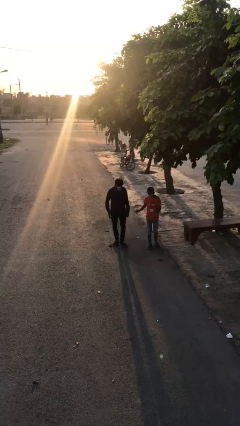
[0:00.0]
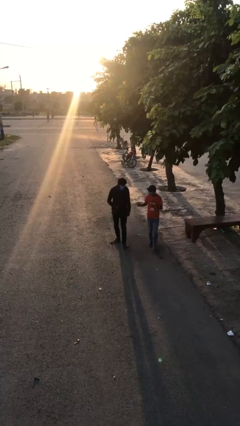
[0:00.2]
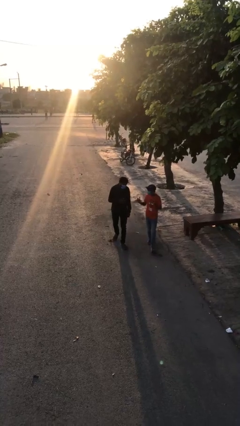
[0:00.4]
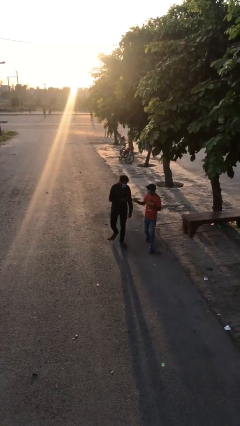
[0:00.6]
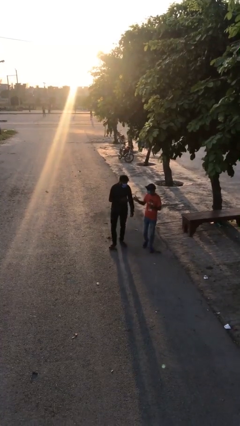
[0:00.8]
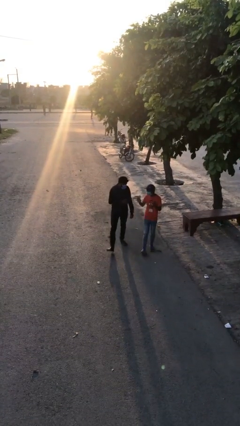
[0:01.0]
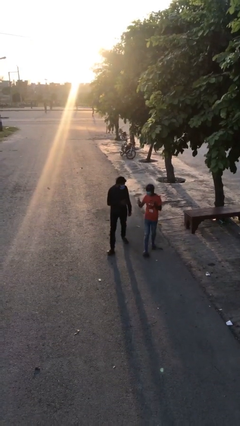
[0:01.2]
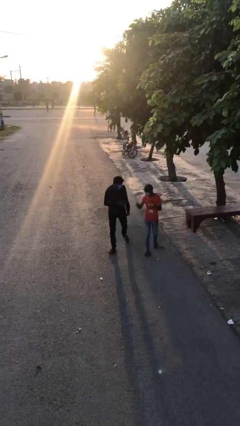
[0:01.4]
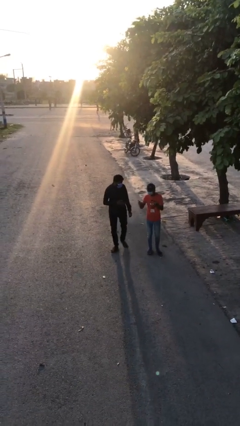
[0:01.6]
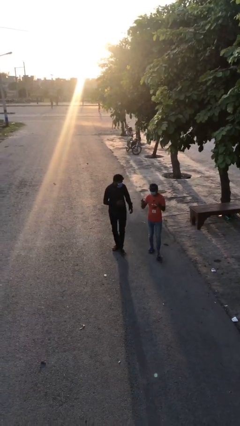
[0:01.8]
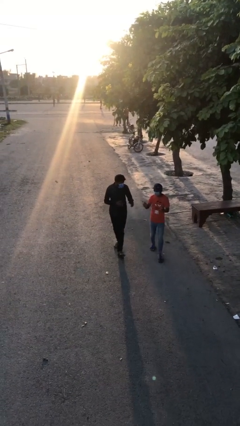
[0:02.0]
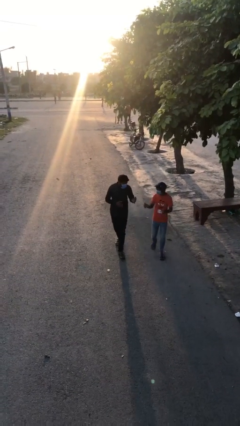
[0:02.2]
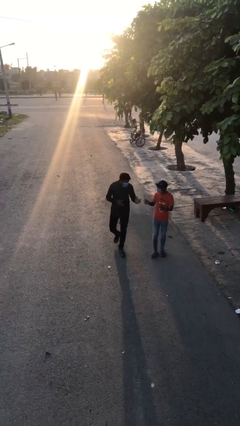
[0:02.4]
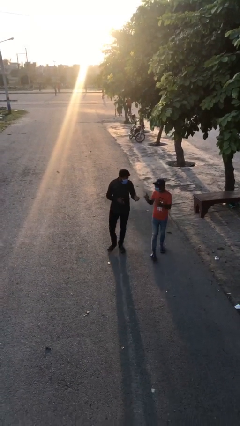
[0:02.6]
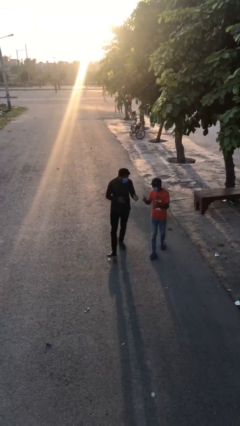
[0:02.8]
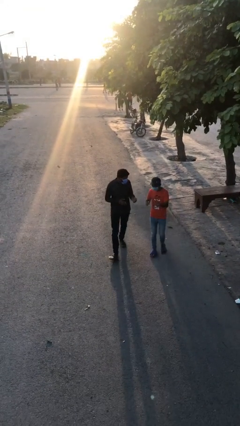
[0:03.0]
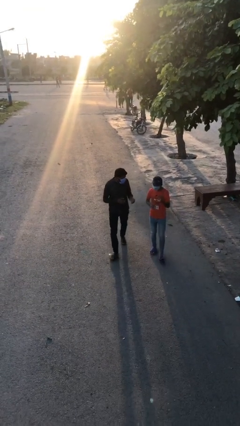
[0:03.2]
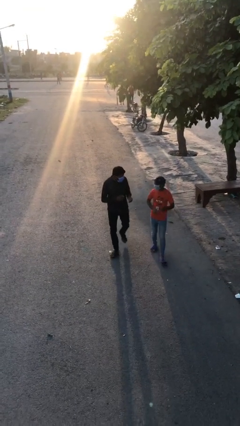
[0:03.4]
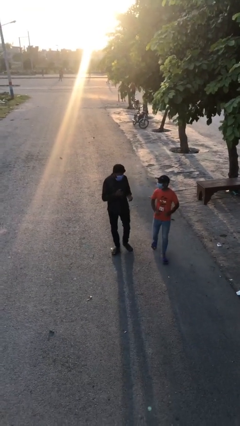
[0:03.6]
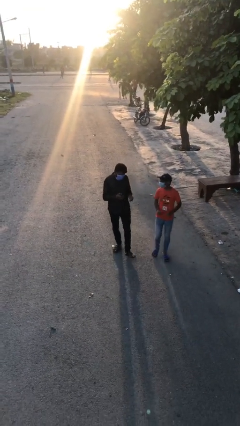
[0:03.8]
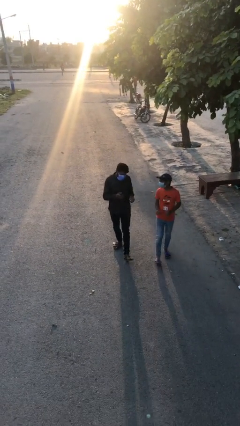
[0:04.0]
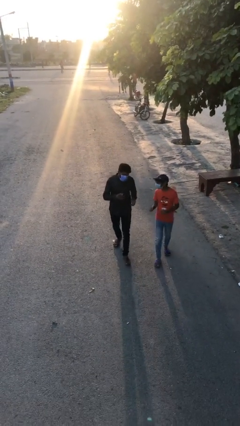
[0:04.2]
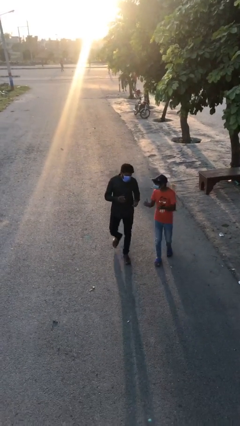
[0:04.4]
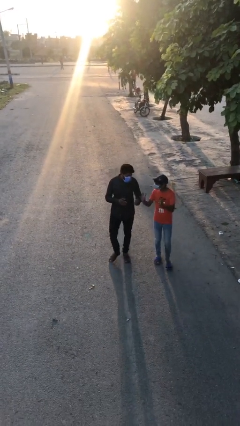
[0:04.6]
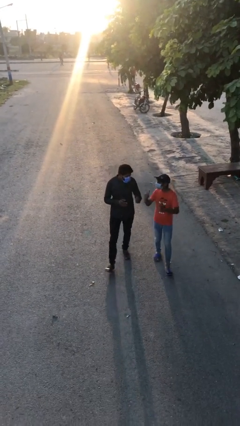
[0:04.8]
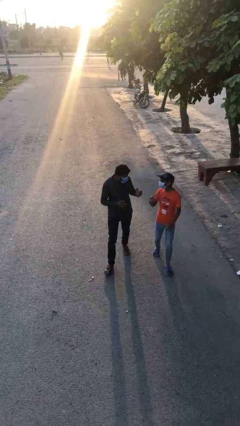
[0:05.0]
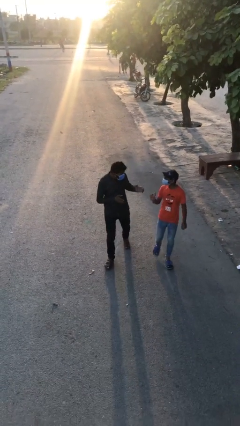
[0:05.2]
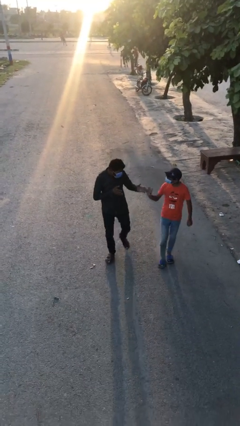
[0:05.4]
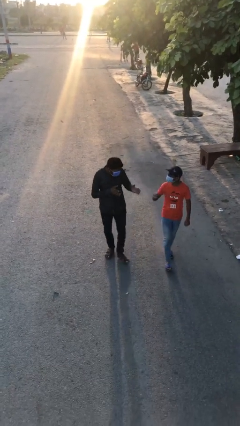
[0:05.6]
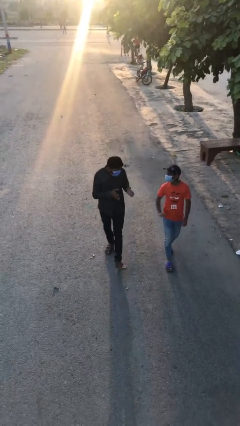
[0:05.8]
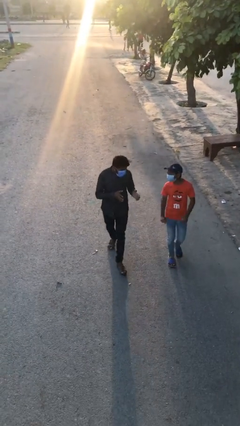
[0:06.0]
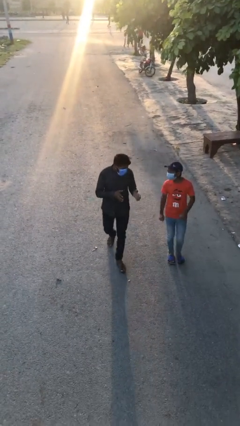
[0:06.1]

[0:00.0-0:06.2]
person talks to person

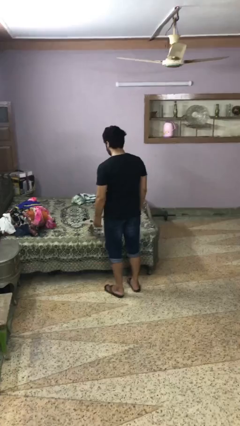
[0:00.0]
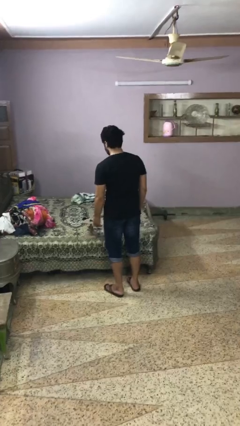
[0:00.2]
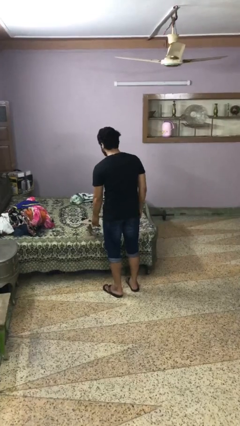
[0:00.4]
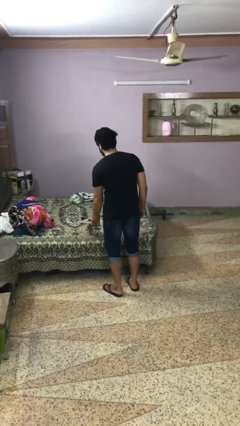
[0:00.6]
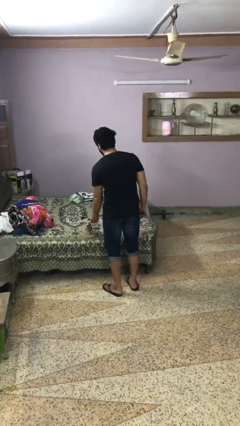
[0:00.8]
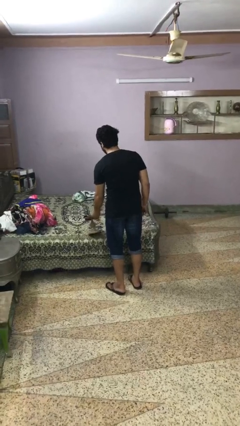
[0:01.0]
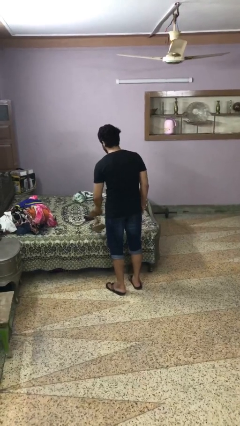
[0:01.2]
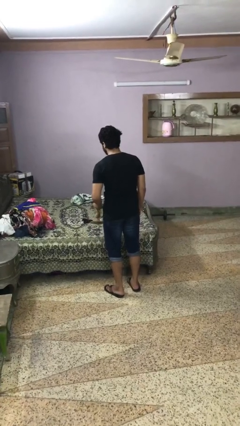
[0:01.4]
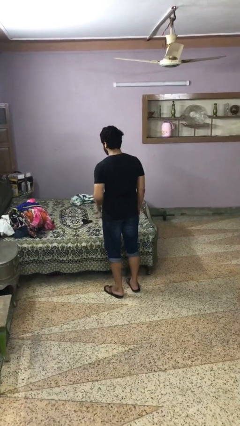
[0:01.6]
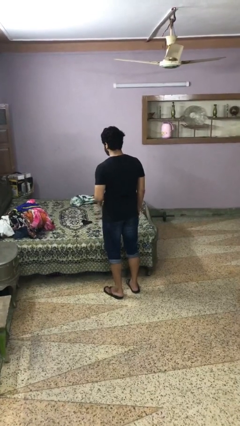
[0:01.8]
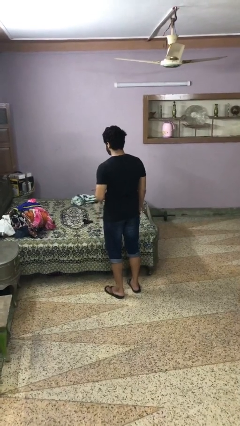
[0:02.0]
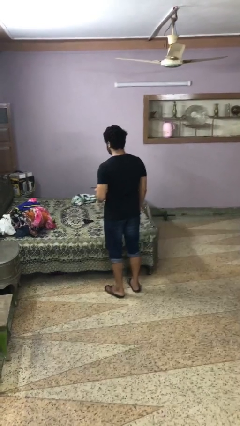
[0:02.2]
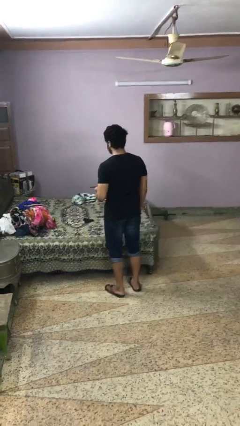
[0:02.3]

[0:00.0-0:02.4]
person picks up object from bed

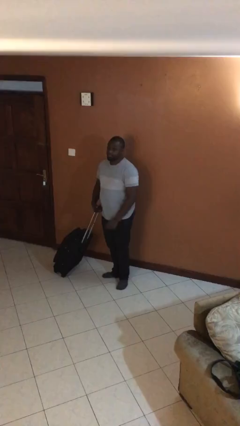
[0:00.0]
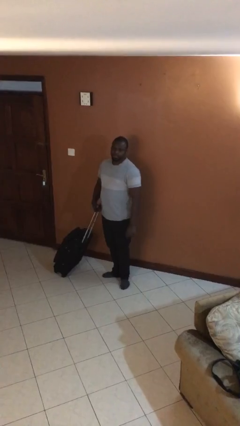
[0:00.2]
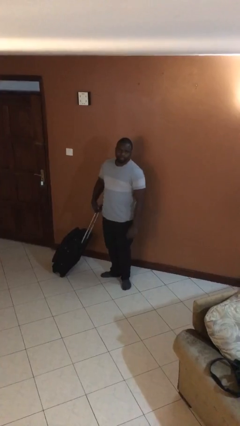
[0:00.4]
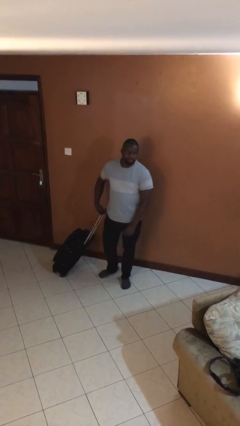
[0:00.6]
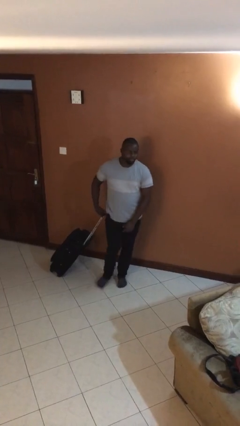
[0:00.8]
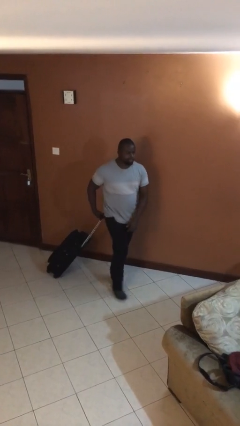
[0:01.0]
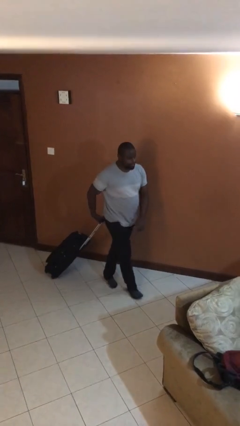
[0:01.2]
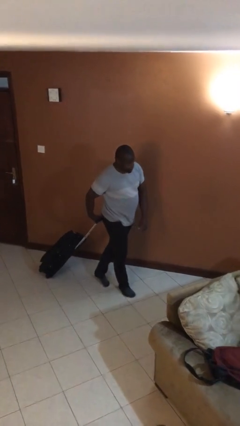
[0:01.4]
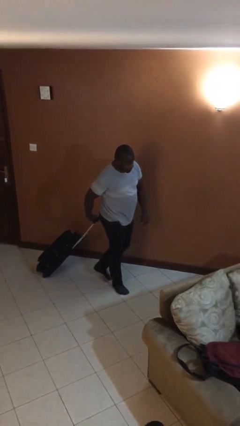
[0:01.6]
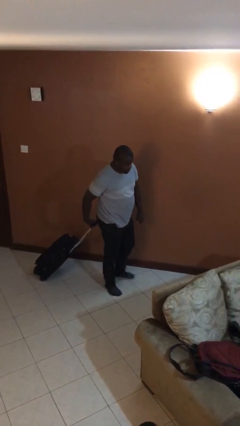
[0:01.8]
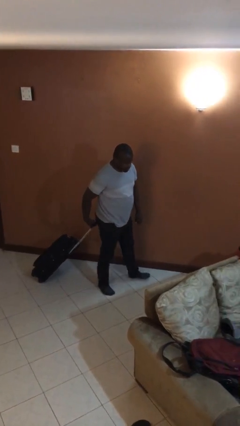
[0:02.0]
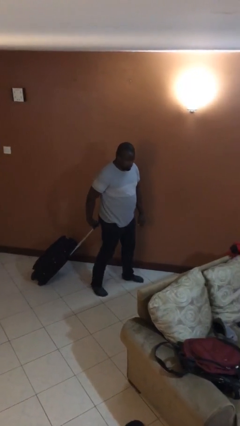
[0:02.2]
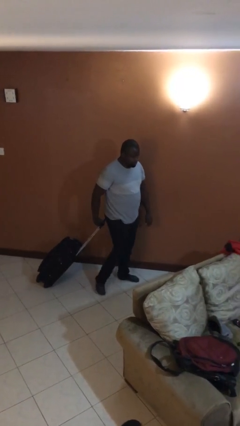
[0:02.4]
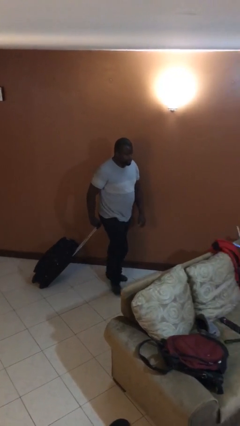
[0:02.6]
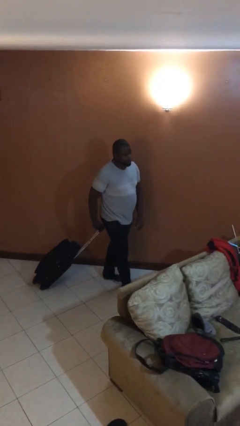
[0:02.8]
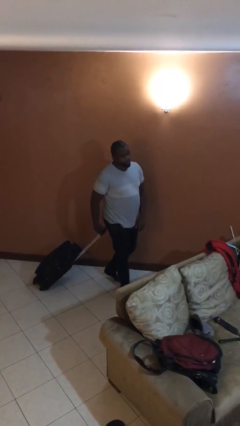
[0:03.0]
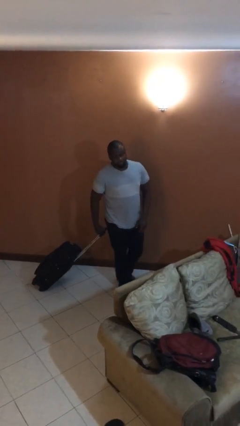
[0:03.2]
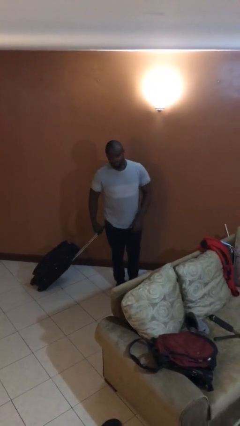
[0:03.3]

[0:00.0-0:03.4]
person pulls wheeled cart

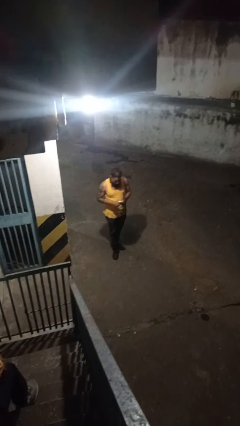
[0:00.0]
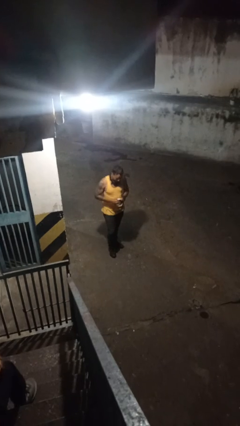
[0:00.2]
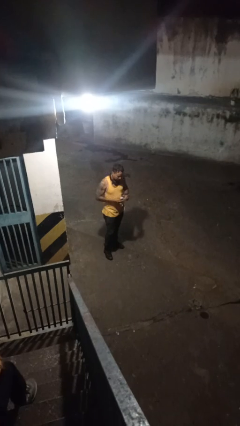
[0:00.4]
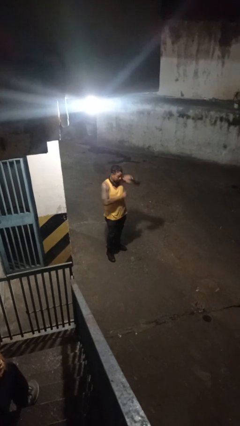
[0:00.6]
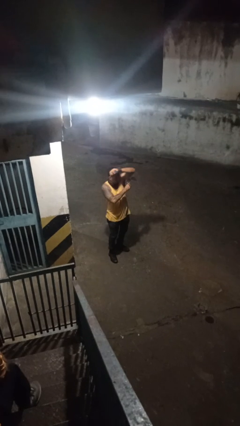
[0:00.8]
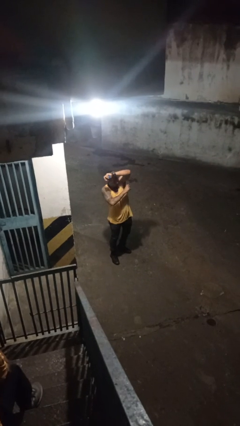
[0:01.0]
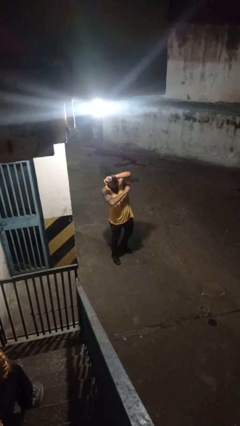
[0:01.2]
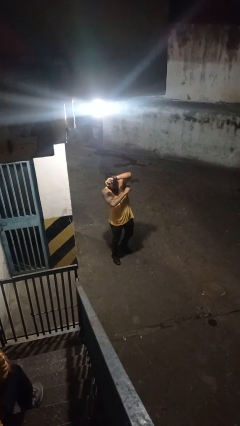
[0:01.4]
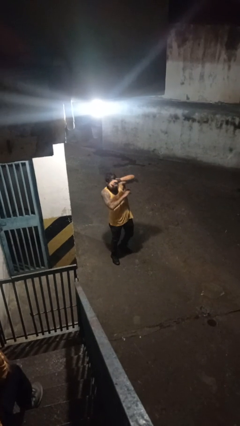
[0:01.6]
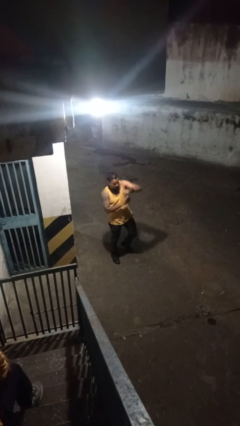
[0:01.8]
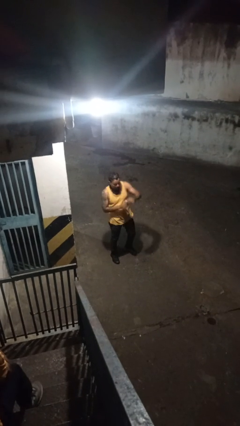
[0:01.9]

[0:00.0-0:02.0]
person applies deodorant

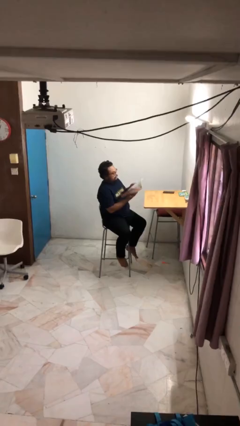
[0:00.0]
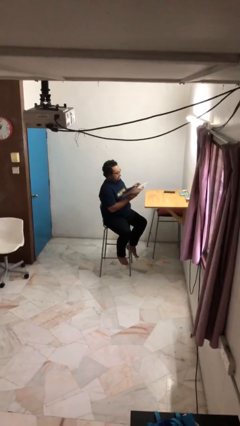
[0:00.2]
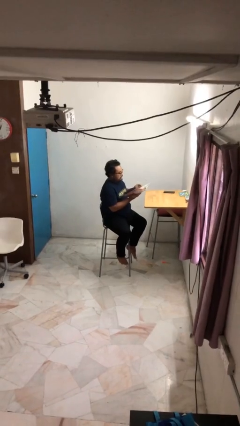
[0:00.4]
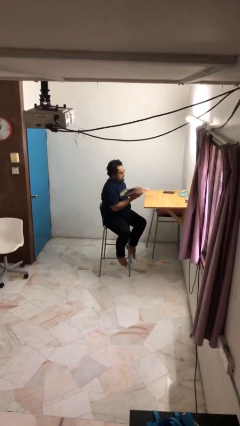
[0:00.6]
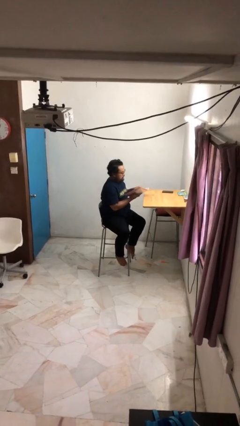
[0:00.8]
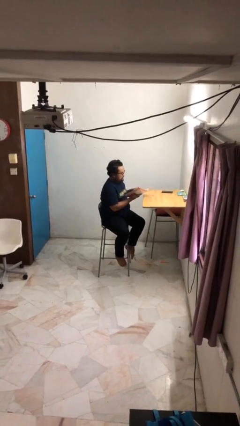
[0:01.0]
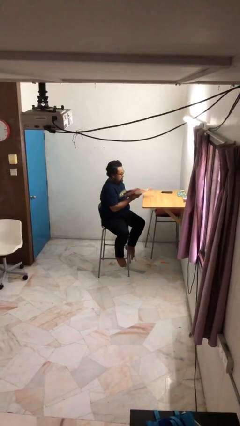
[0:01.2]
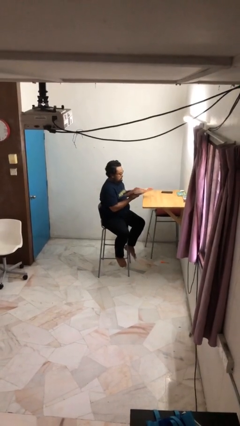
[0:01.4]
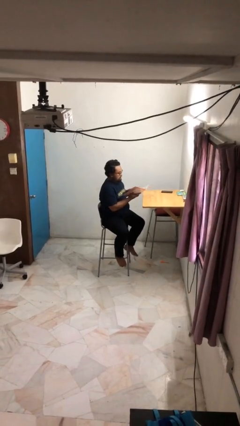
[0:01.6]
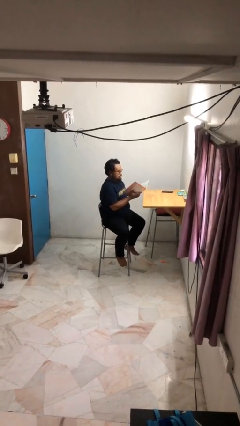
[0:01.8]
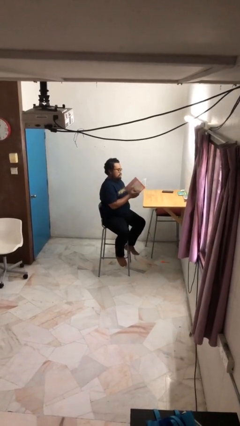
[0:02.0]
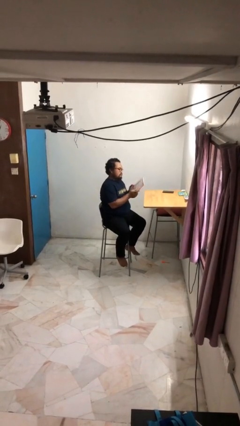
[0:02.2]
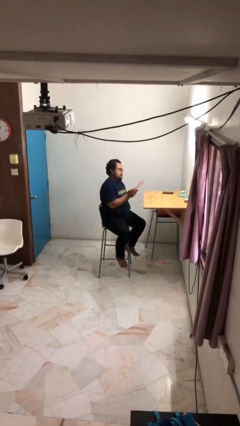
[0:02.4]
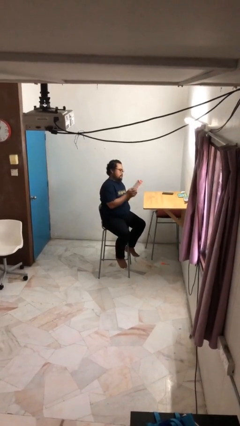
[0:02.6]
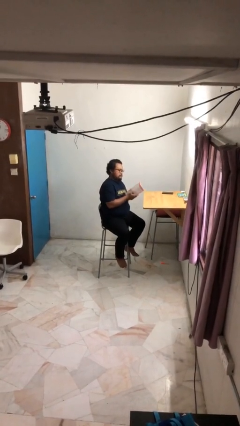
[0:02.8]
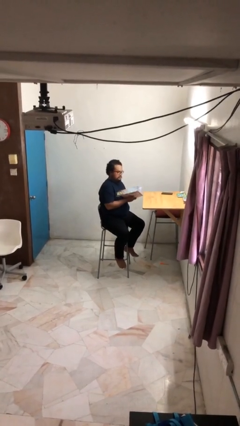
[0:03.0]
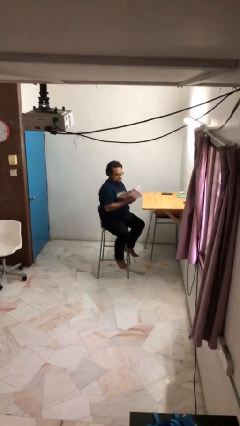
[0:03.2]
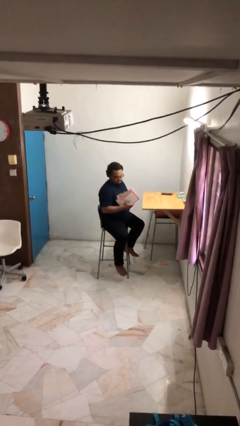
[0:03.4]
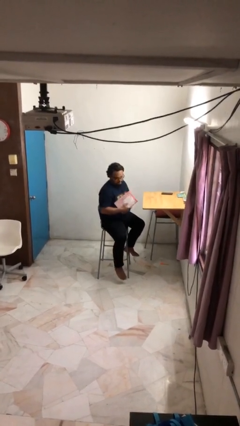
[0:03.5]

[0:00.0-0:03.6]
person reads document

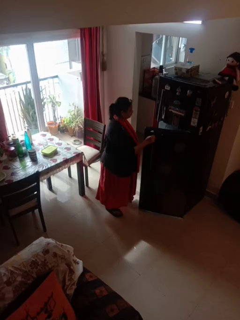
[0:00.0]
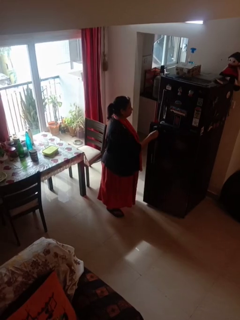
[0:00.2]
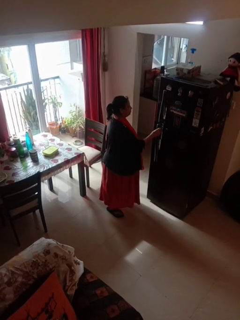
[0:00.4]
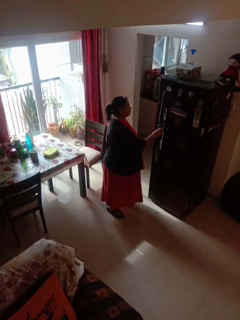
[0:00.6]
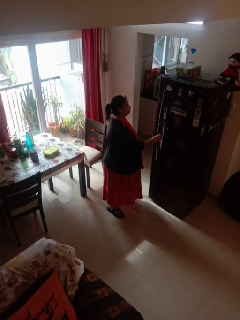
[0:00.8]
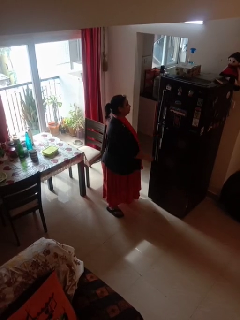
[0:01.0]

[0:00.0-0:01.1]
person closes refrigerator
